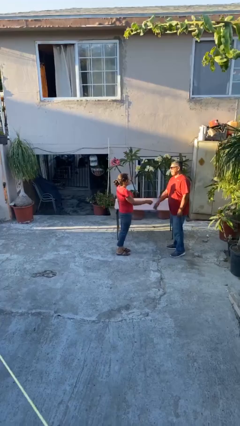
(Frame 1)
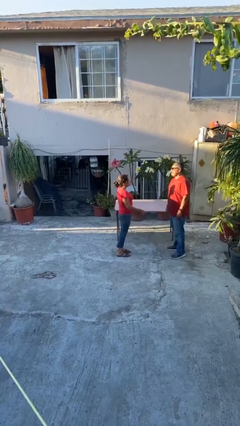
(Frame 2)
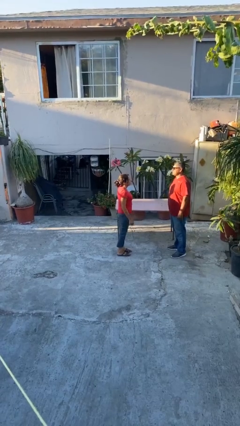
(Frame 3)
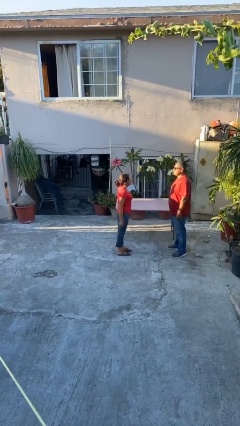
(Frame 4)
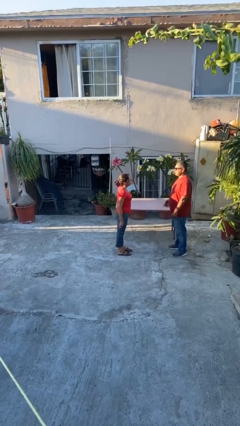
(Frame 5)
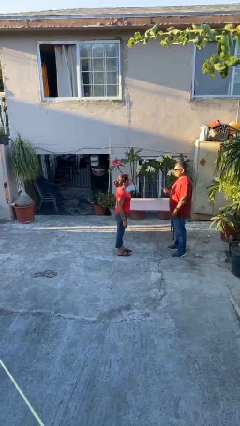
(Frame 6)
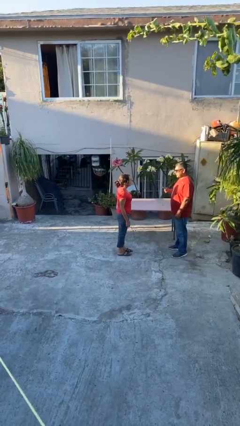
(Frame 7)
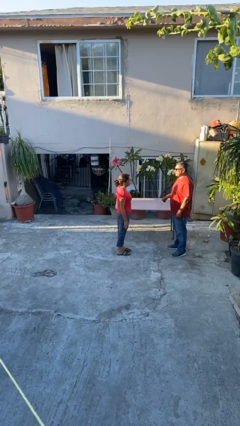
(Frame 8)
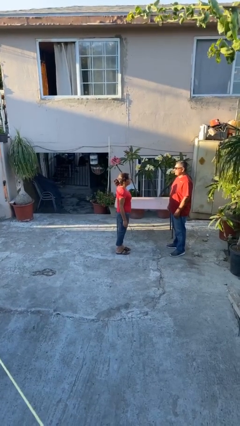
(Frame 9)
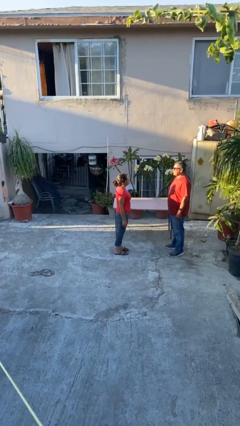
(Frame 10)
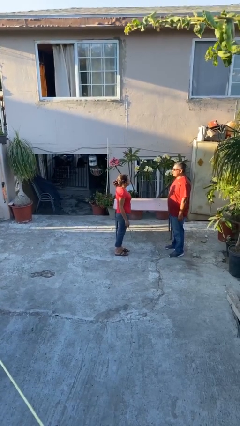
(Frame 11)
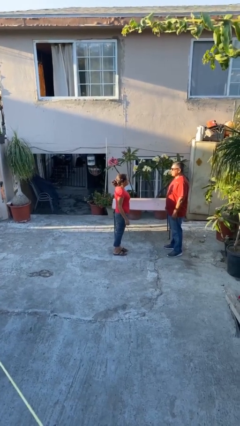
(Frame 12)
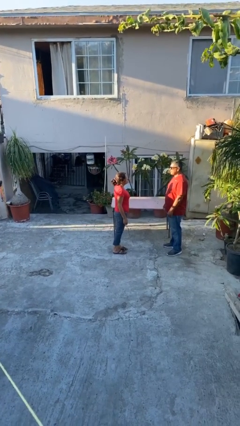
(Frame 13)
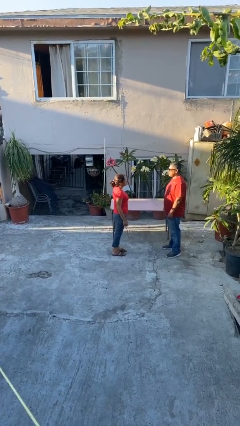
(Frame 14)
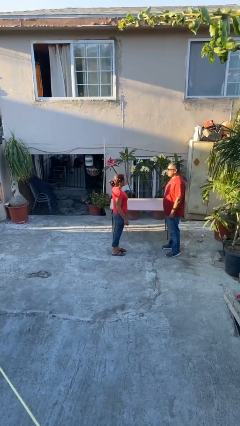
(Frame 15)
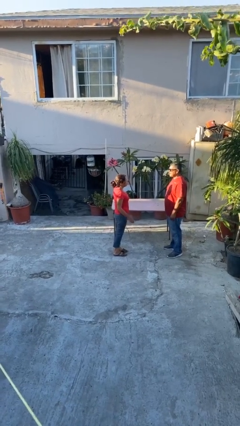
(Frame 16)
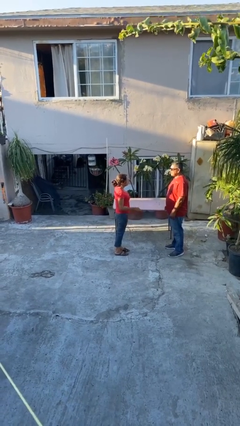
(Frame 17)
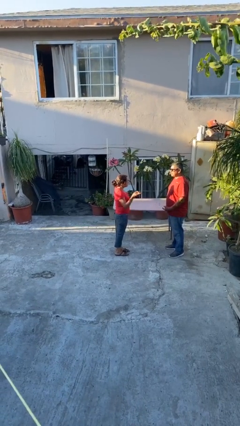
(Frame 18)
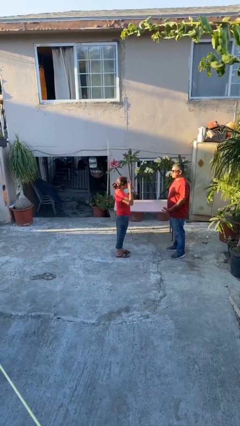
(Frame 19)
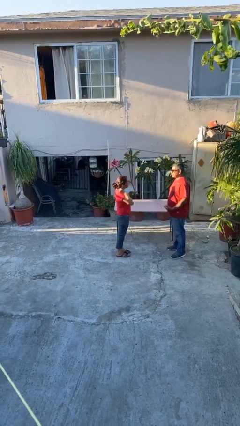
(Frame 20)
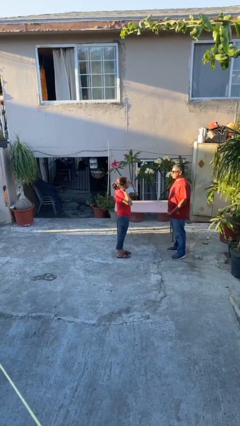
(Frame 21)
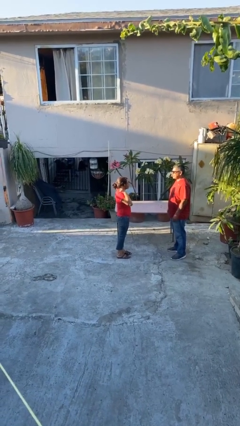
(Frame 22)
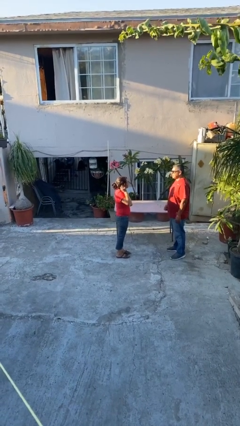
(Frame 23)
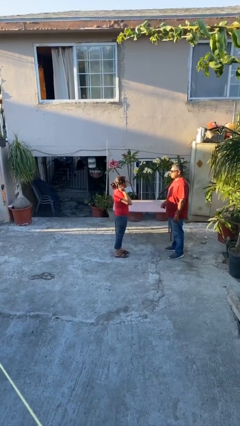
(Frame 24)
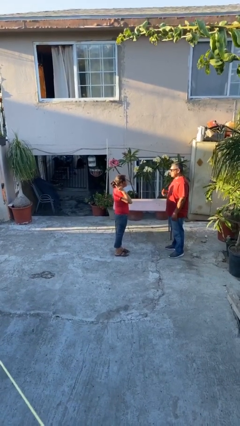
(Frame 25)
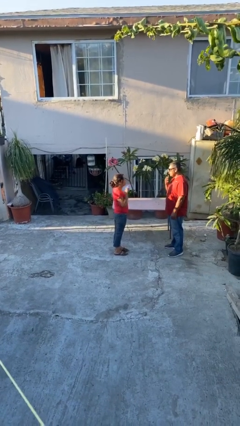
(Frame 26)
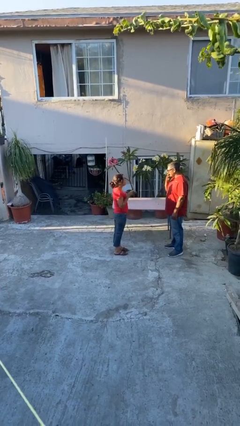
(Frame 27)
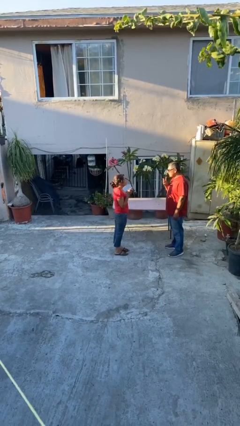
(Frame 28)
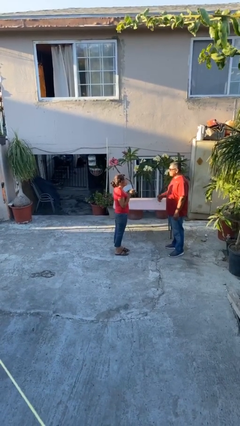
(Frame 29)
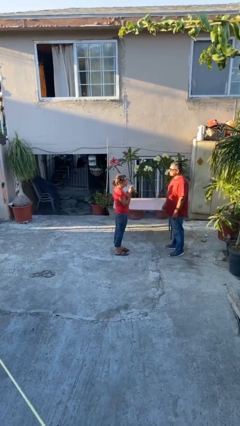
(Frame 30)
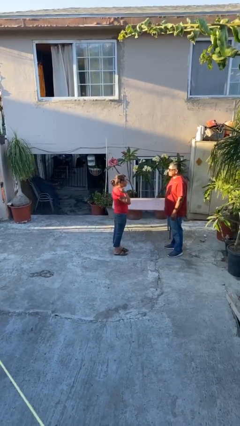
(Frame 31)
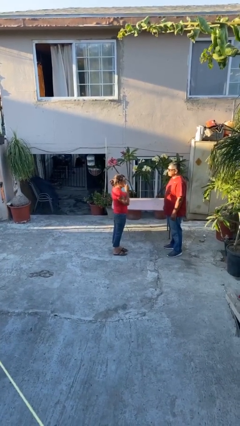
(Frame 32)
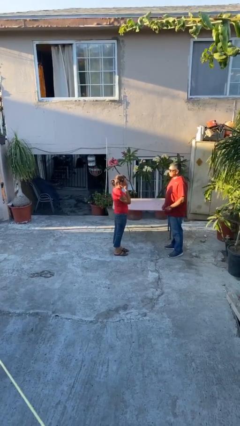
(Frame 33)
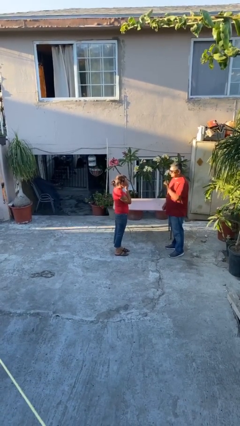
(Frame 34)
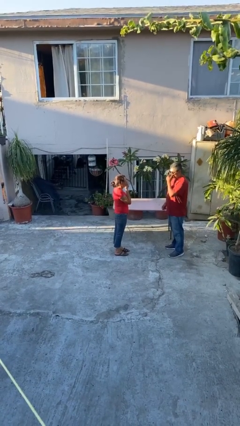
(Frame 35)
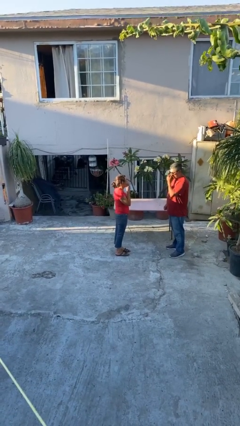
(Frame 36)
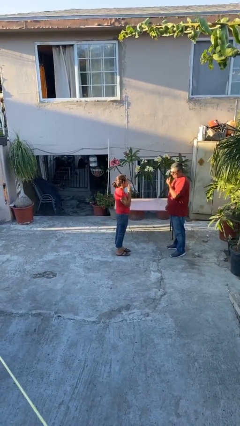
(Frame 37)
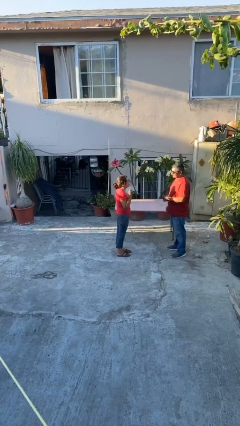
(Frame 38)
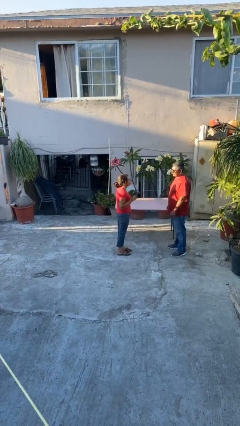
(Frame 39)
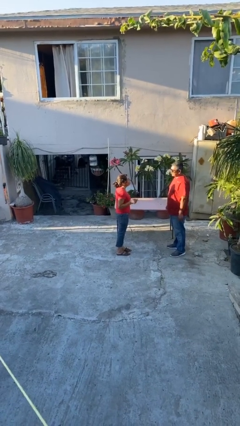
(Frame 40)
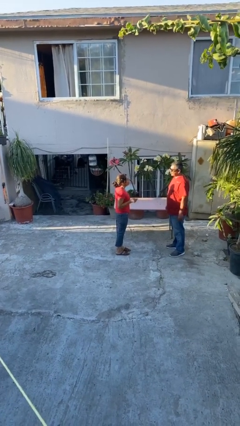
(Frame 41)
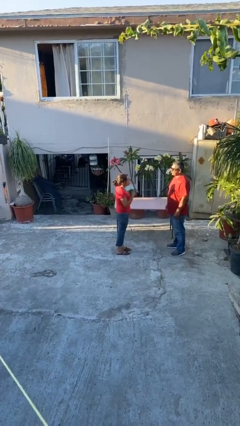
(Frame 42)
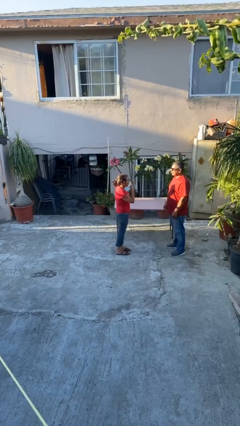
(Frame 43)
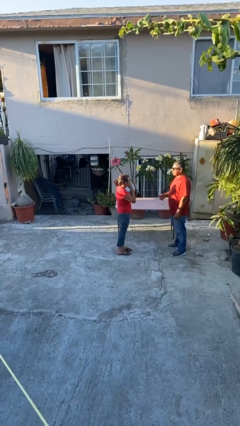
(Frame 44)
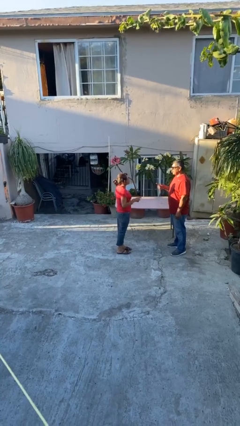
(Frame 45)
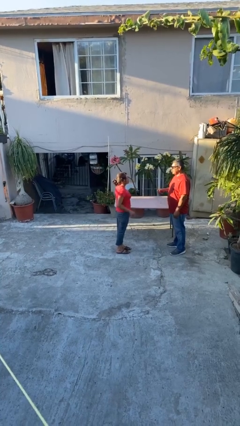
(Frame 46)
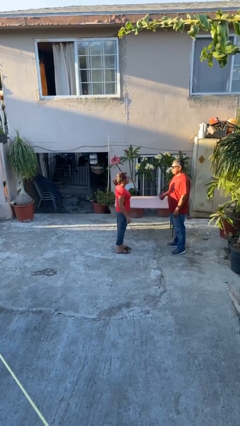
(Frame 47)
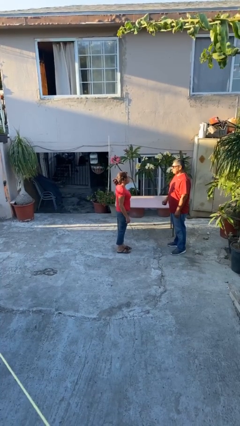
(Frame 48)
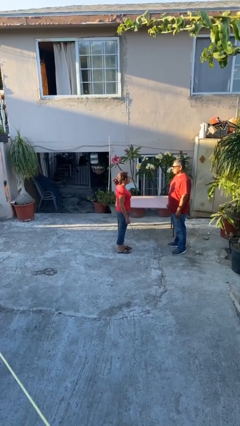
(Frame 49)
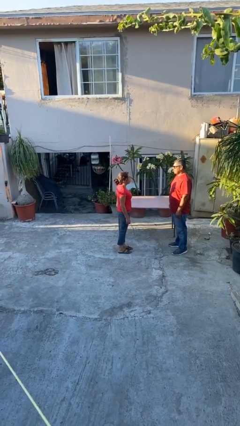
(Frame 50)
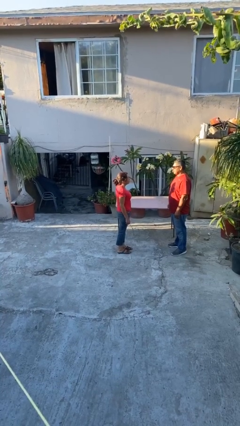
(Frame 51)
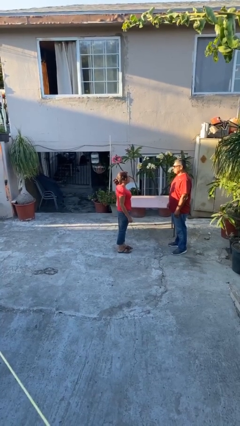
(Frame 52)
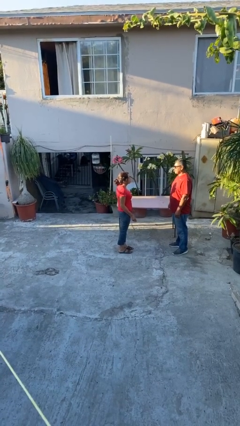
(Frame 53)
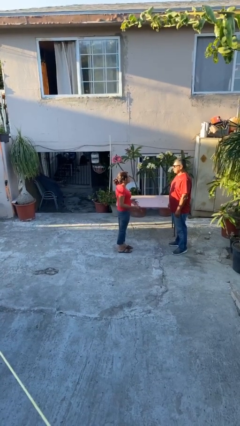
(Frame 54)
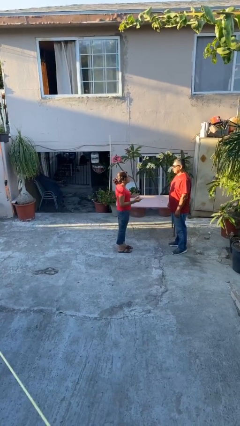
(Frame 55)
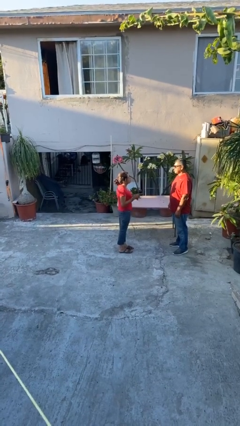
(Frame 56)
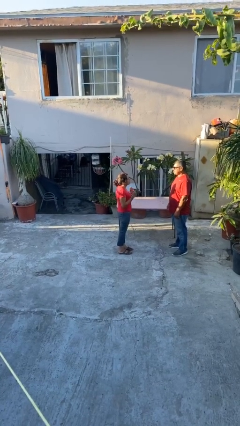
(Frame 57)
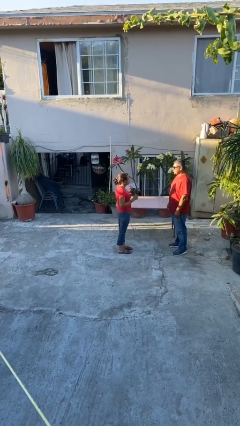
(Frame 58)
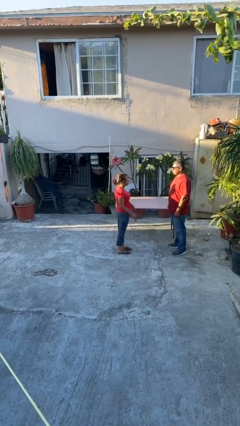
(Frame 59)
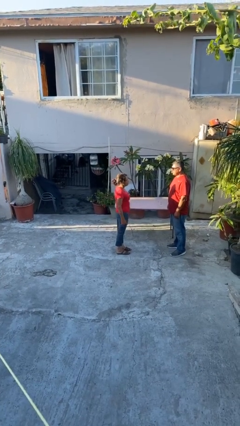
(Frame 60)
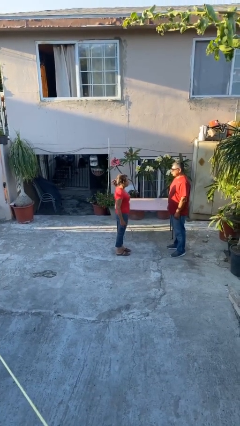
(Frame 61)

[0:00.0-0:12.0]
person talks to person

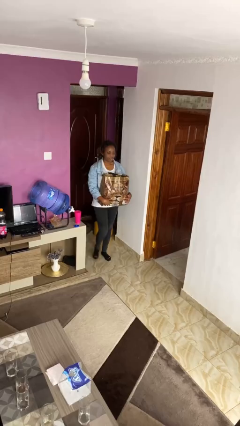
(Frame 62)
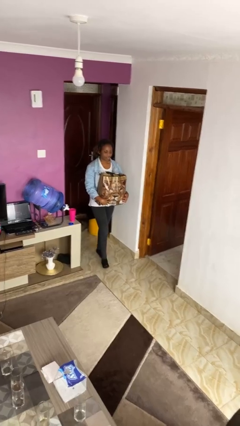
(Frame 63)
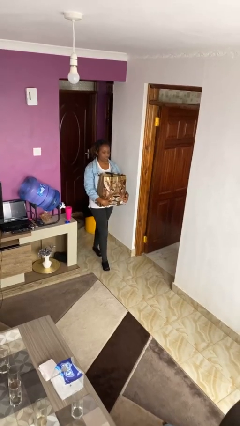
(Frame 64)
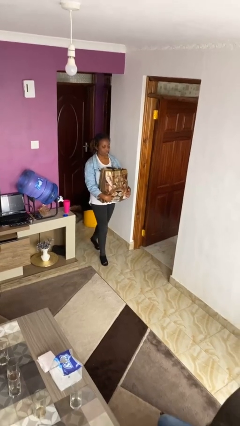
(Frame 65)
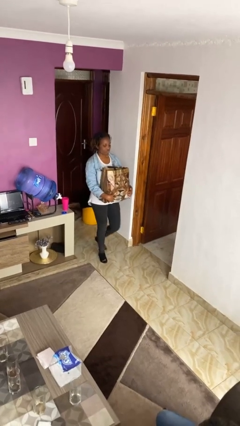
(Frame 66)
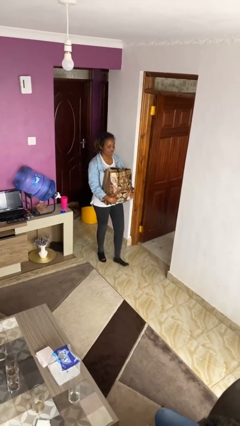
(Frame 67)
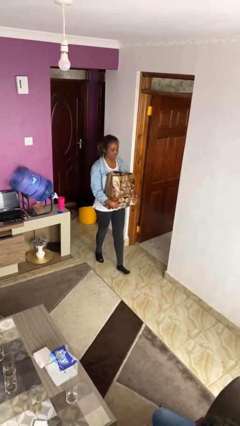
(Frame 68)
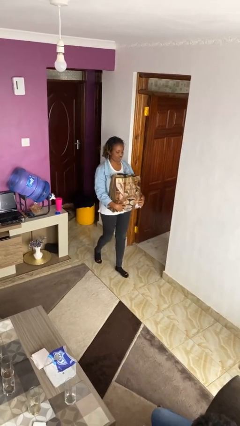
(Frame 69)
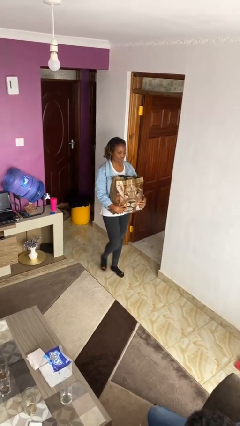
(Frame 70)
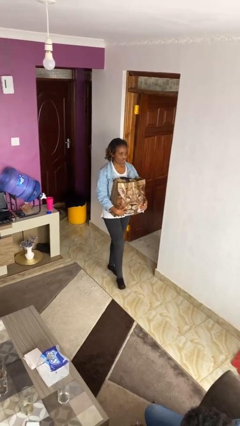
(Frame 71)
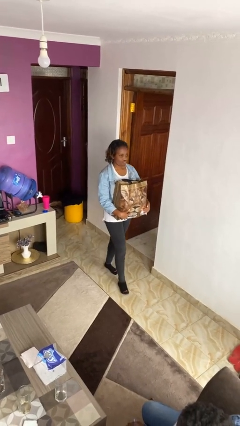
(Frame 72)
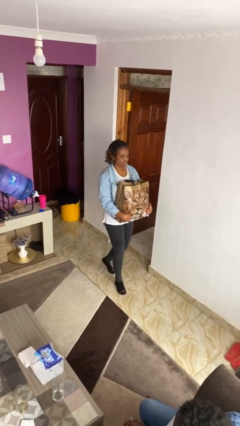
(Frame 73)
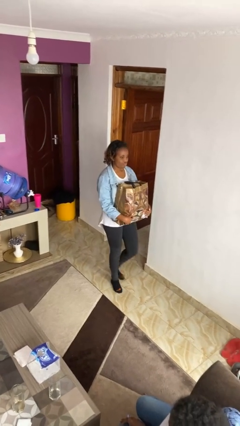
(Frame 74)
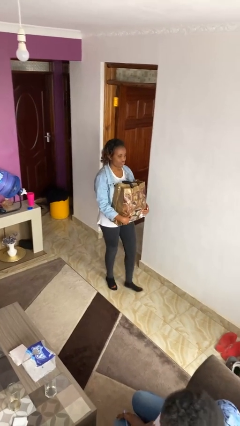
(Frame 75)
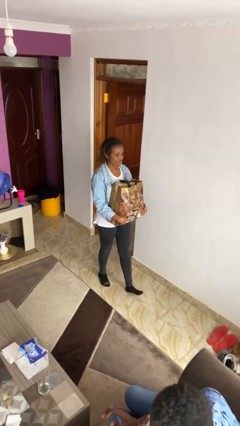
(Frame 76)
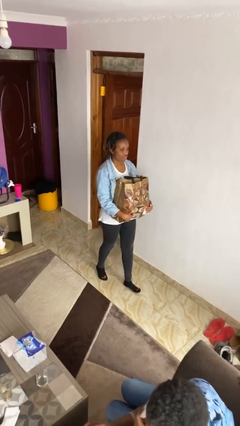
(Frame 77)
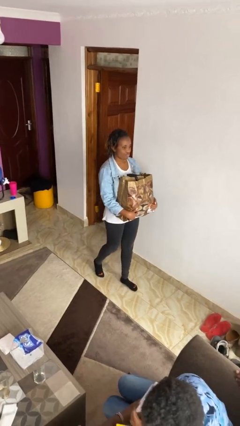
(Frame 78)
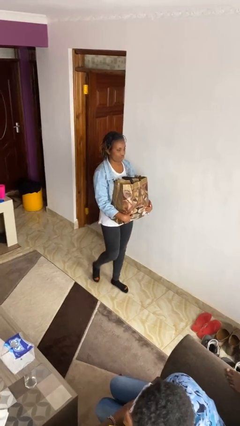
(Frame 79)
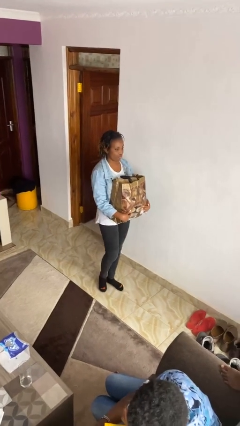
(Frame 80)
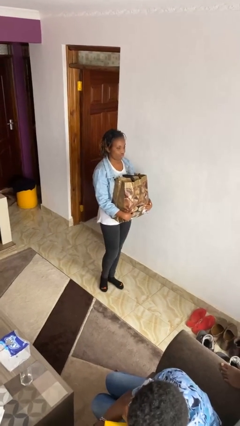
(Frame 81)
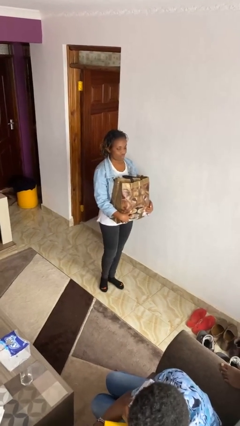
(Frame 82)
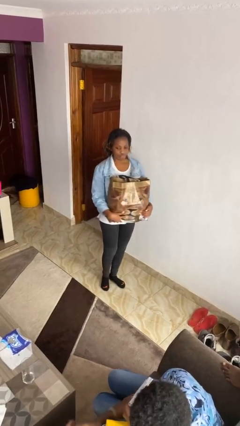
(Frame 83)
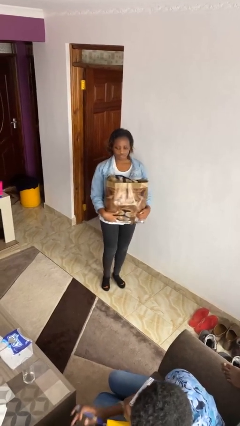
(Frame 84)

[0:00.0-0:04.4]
person carries groceries

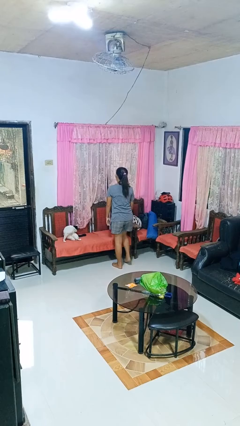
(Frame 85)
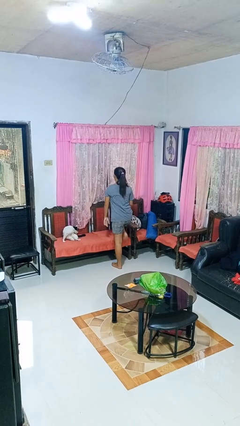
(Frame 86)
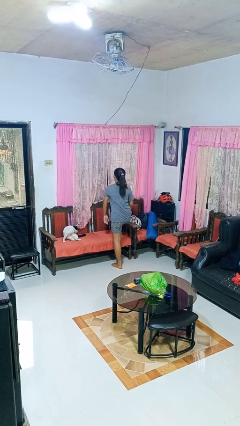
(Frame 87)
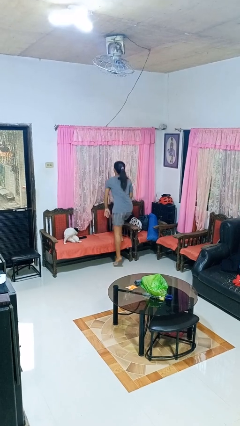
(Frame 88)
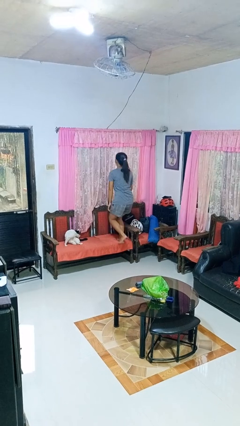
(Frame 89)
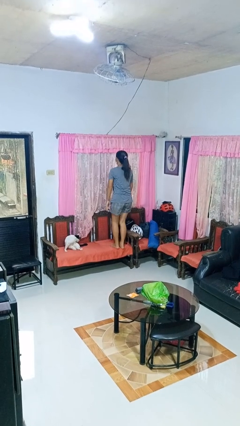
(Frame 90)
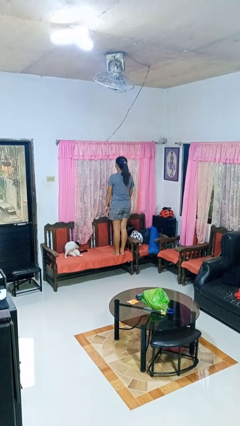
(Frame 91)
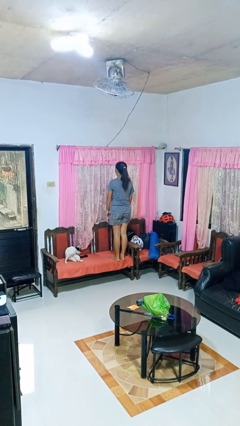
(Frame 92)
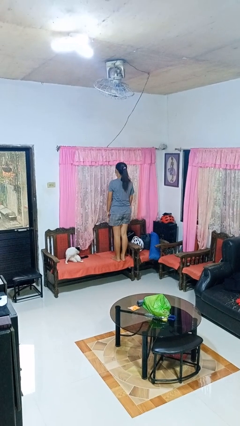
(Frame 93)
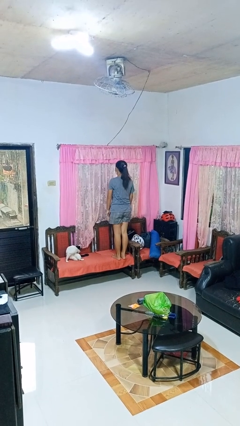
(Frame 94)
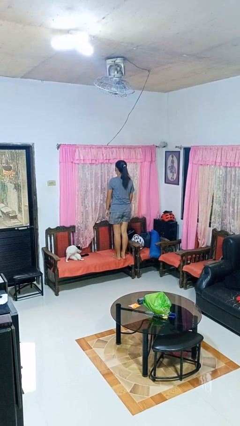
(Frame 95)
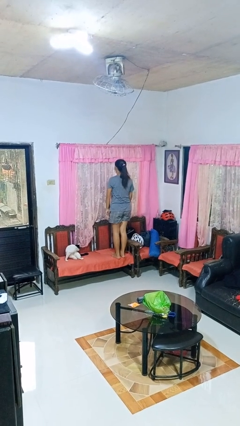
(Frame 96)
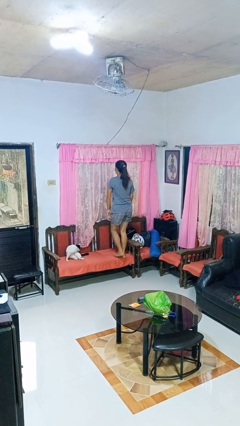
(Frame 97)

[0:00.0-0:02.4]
person climbs on chair
